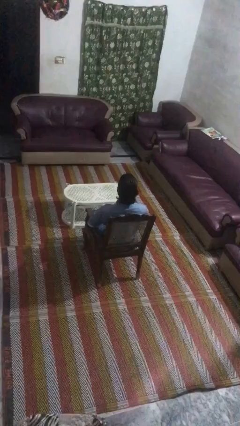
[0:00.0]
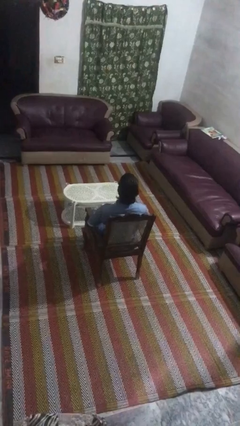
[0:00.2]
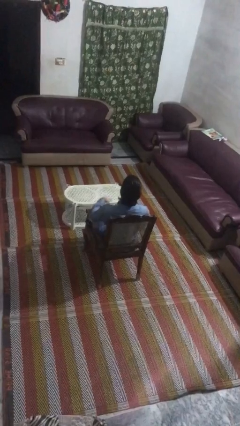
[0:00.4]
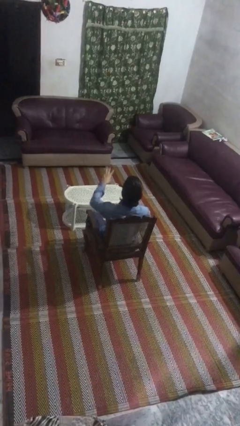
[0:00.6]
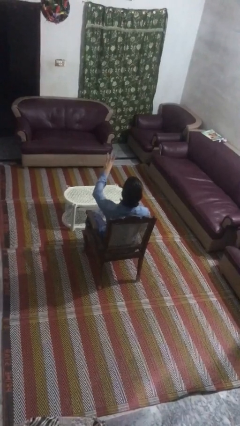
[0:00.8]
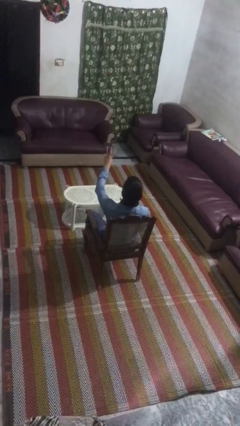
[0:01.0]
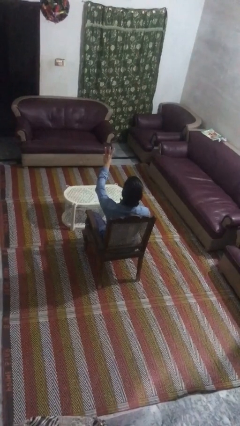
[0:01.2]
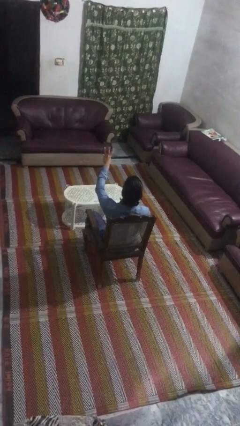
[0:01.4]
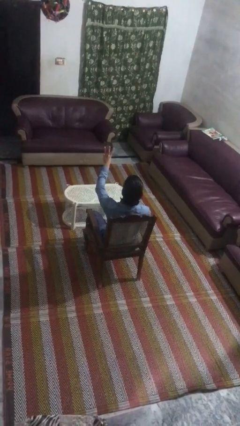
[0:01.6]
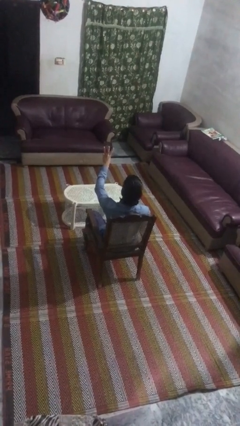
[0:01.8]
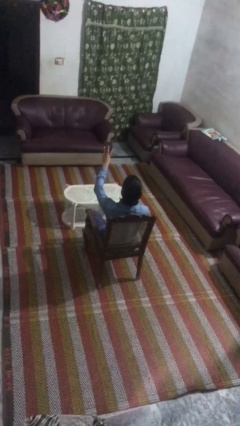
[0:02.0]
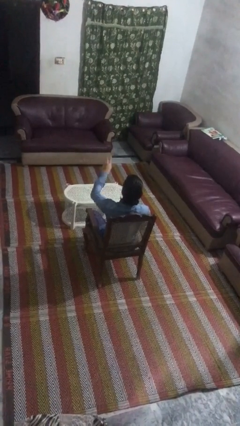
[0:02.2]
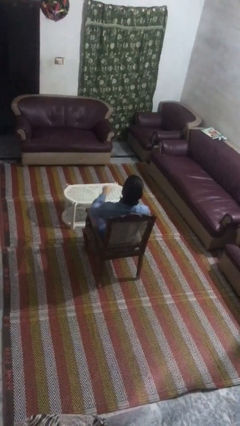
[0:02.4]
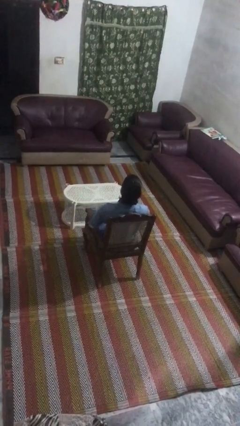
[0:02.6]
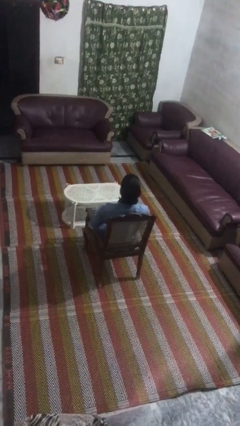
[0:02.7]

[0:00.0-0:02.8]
person gestures number three

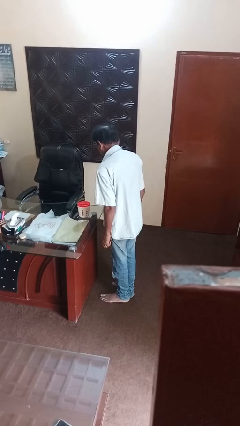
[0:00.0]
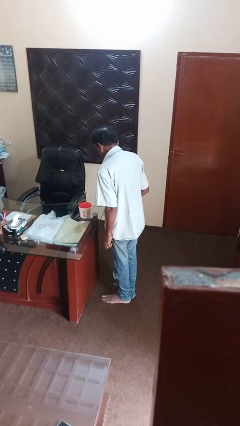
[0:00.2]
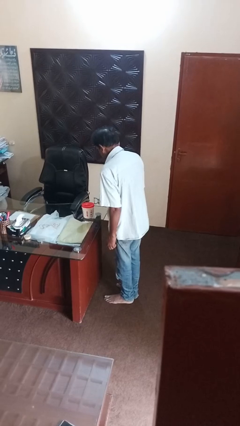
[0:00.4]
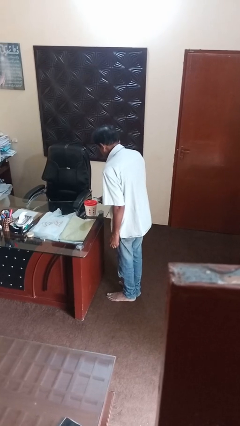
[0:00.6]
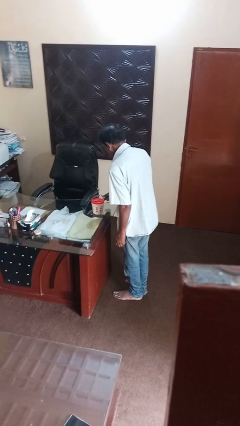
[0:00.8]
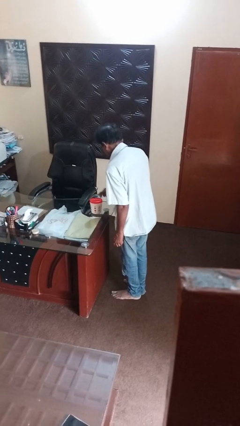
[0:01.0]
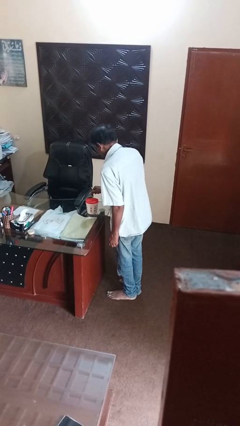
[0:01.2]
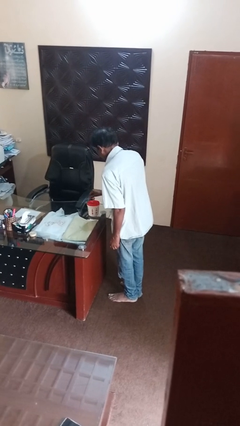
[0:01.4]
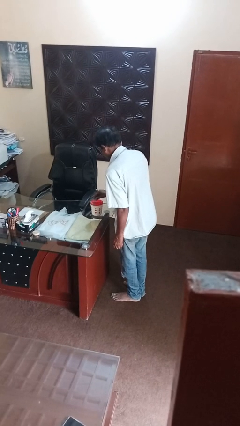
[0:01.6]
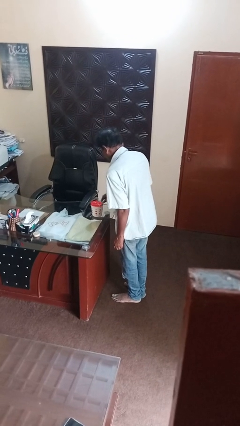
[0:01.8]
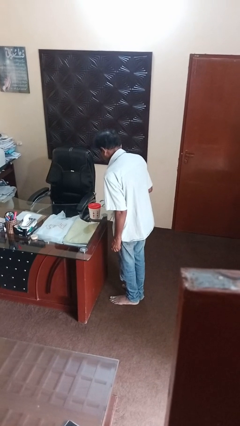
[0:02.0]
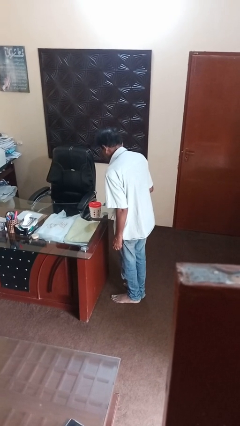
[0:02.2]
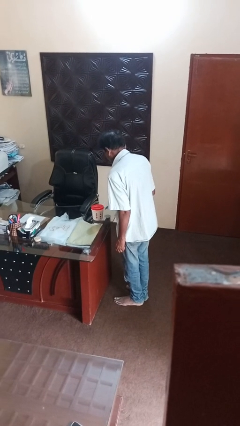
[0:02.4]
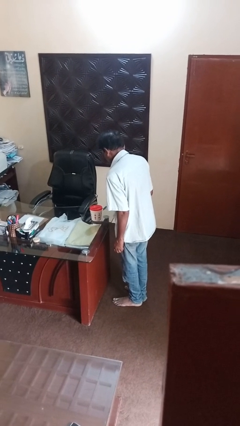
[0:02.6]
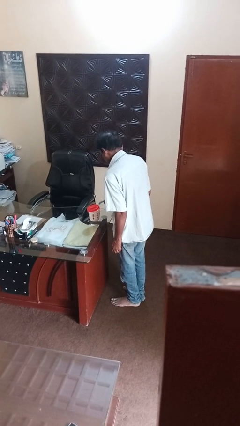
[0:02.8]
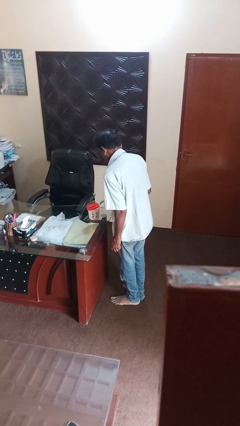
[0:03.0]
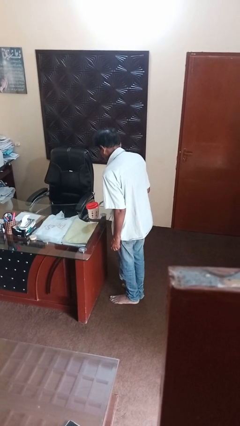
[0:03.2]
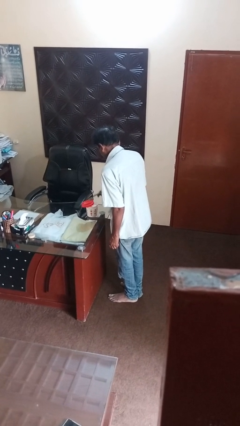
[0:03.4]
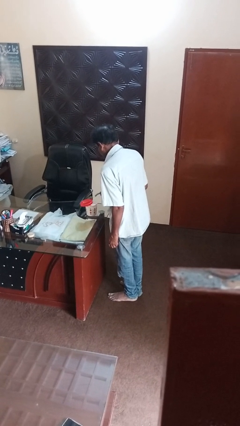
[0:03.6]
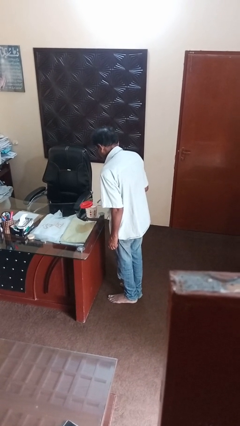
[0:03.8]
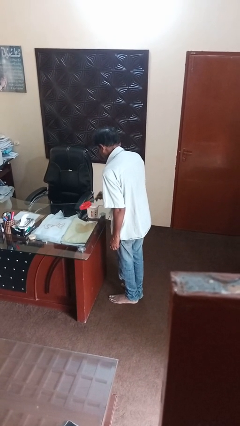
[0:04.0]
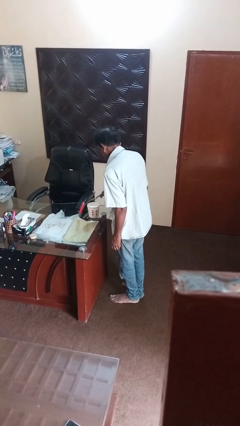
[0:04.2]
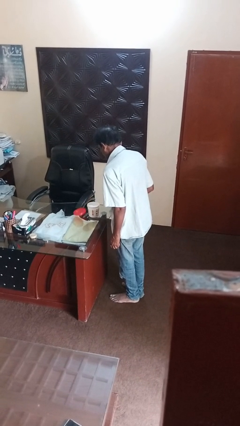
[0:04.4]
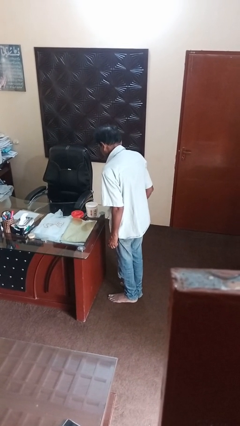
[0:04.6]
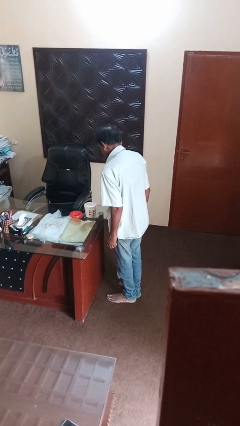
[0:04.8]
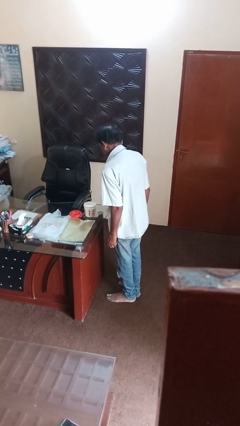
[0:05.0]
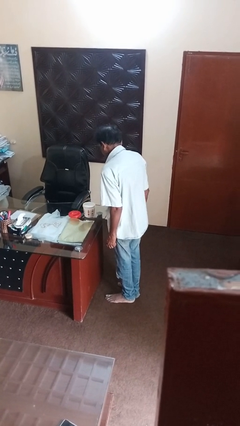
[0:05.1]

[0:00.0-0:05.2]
person opens can with can opener

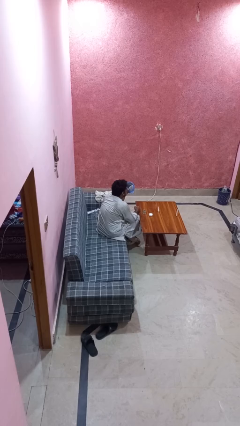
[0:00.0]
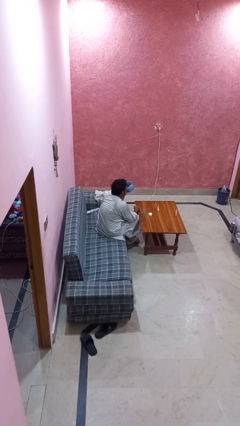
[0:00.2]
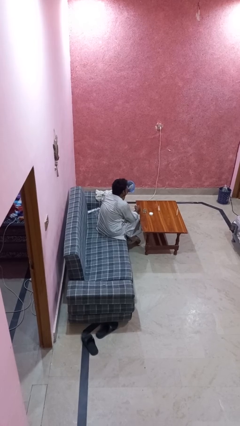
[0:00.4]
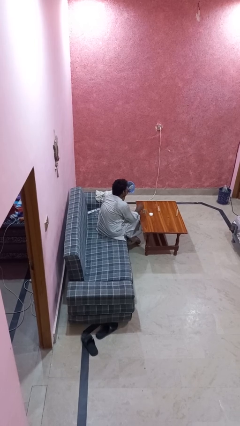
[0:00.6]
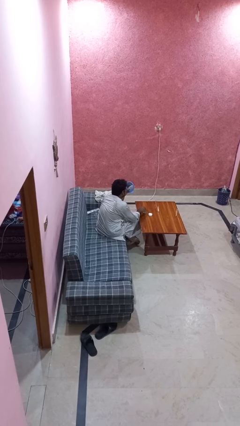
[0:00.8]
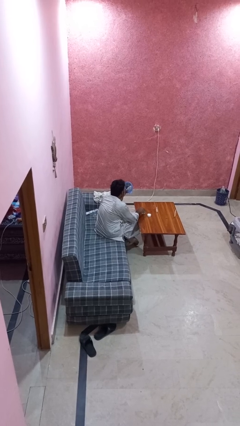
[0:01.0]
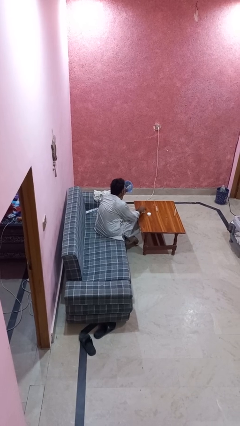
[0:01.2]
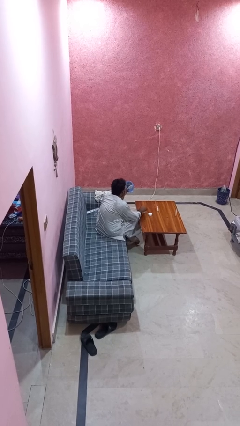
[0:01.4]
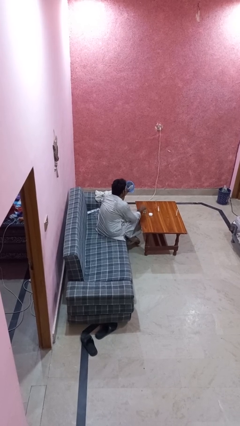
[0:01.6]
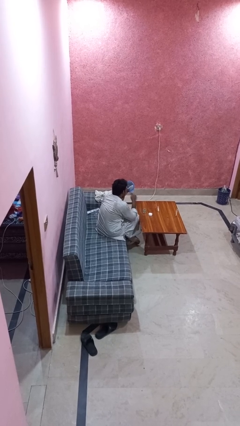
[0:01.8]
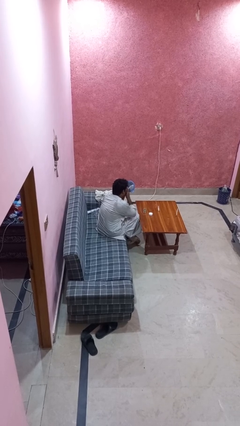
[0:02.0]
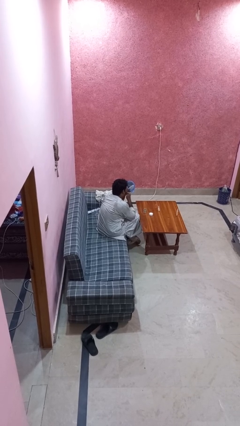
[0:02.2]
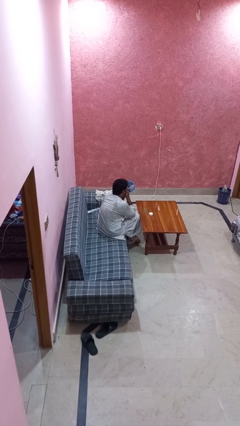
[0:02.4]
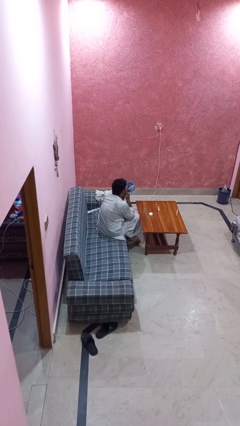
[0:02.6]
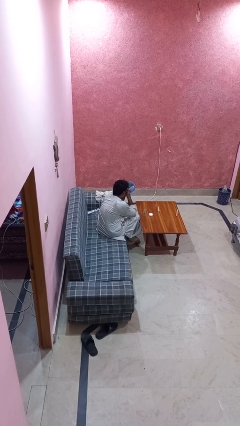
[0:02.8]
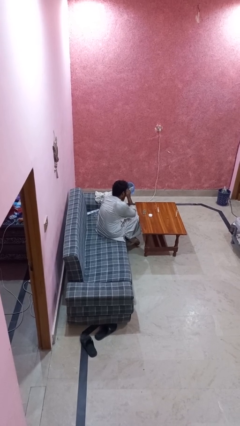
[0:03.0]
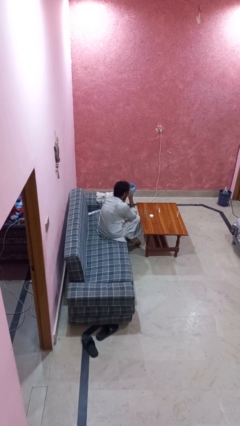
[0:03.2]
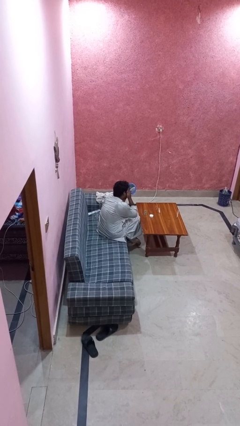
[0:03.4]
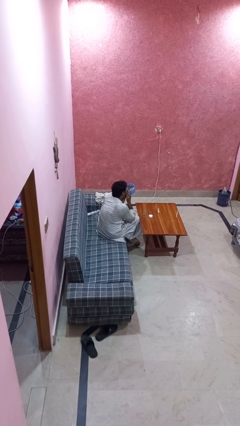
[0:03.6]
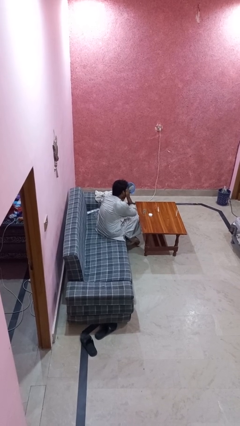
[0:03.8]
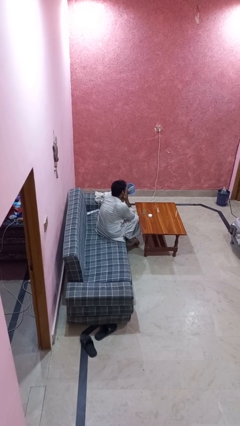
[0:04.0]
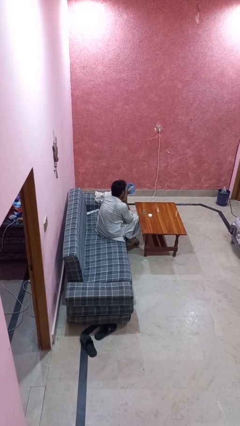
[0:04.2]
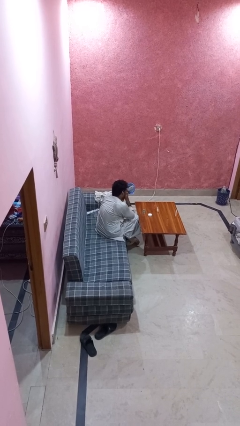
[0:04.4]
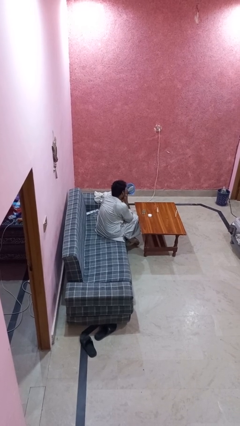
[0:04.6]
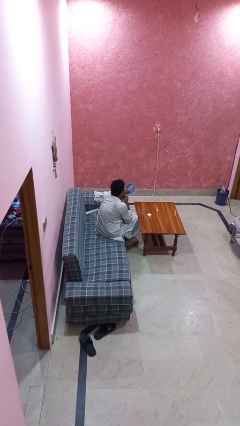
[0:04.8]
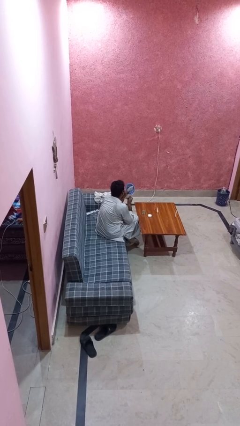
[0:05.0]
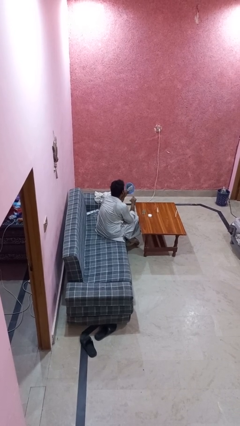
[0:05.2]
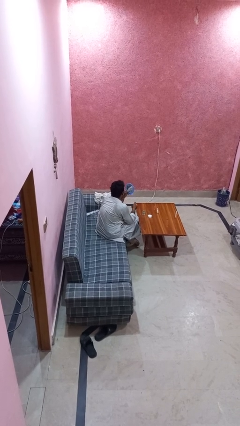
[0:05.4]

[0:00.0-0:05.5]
person applies foundation makeup

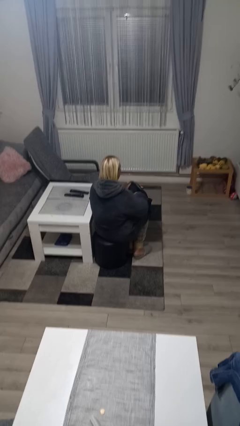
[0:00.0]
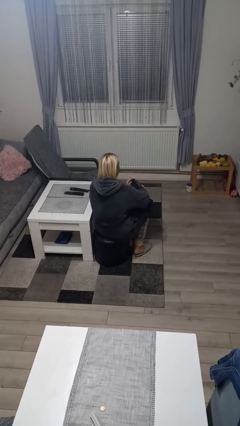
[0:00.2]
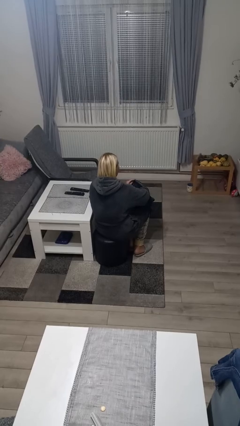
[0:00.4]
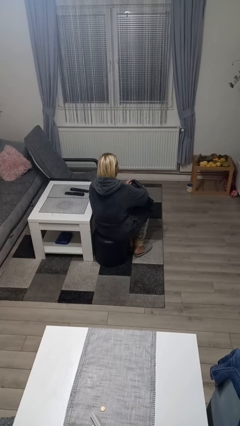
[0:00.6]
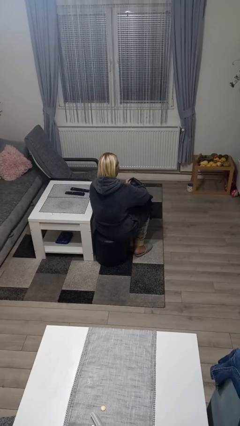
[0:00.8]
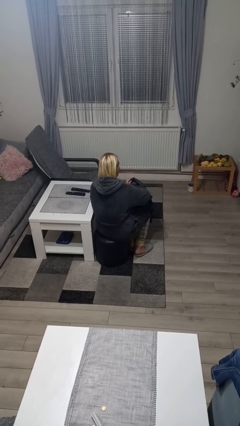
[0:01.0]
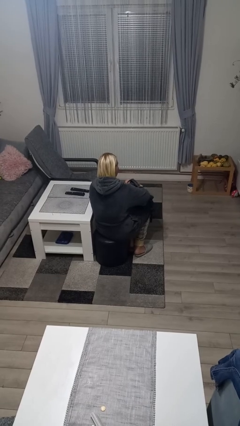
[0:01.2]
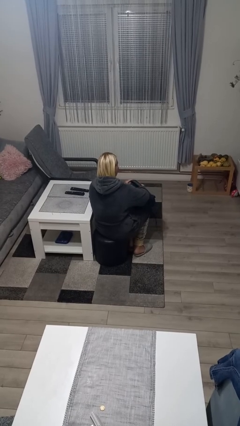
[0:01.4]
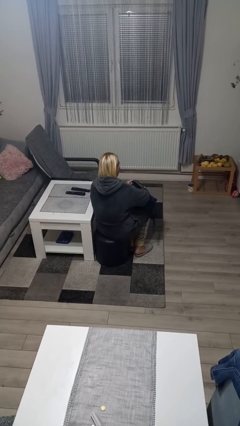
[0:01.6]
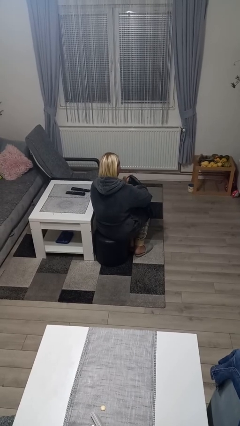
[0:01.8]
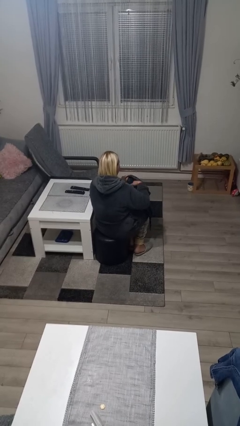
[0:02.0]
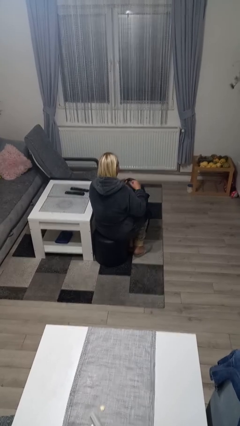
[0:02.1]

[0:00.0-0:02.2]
person searches in bag

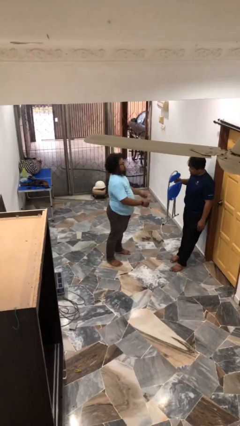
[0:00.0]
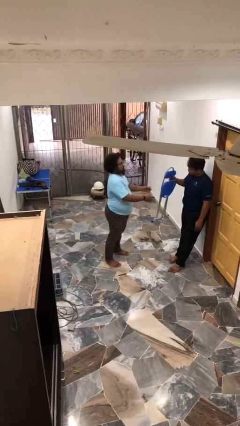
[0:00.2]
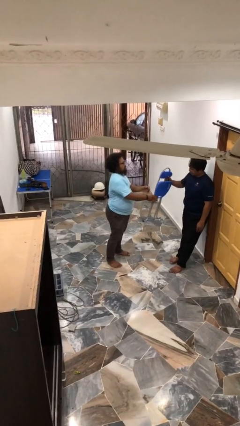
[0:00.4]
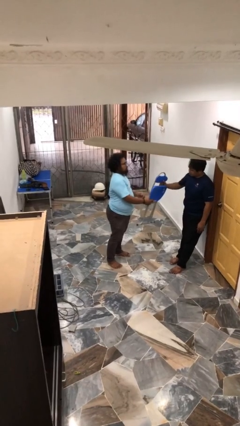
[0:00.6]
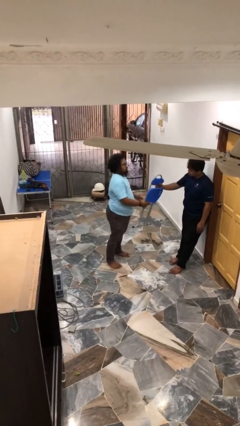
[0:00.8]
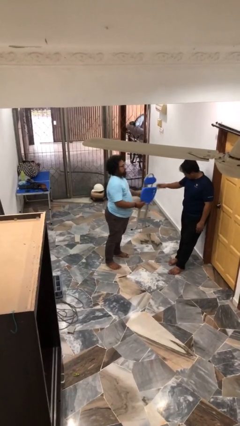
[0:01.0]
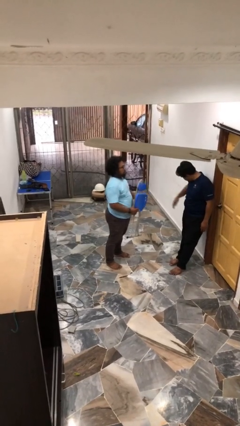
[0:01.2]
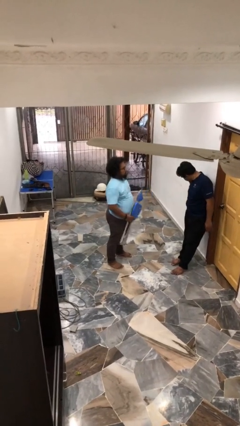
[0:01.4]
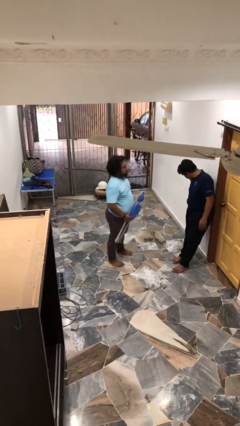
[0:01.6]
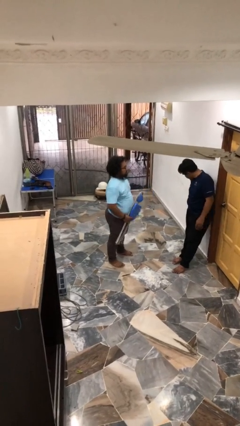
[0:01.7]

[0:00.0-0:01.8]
person transfers object to person

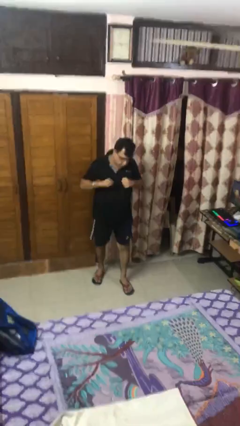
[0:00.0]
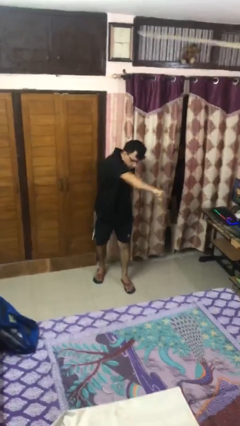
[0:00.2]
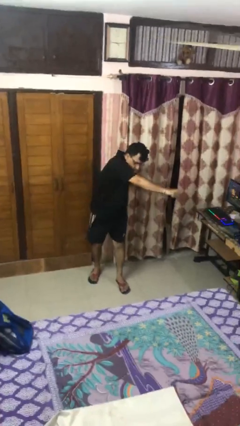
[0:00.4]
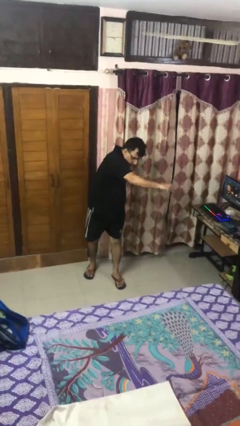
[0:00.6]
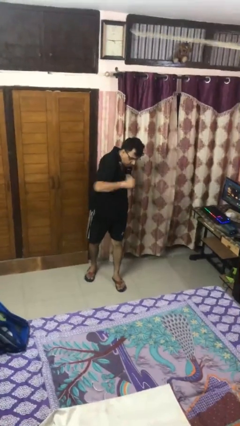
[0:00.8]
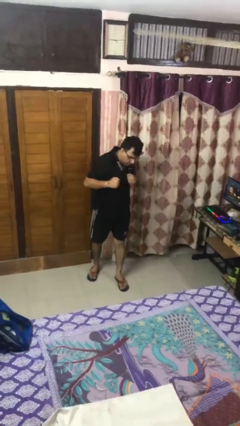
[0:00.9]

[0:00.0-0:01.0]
person punches
